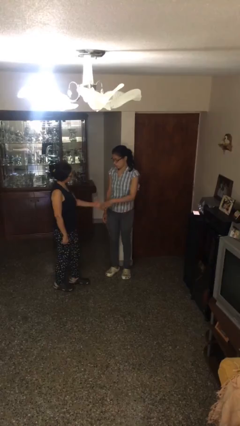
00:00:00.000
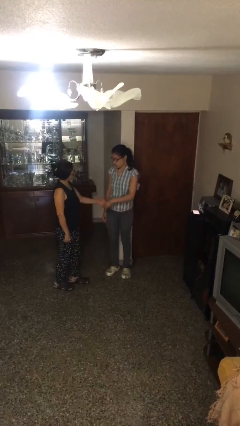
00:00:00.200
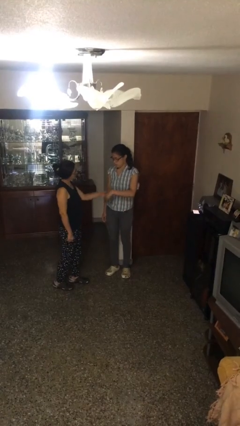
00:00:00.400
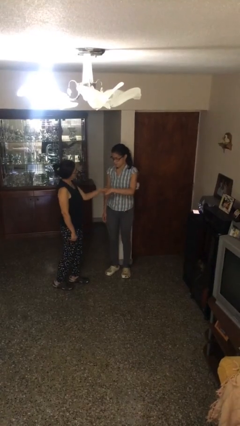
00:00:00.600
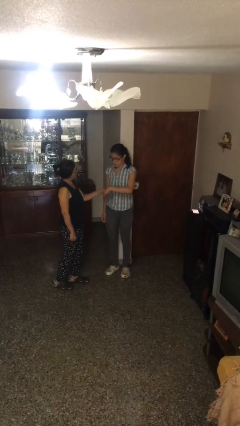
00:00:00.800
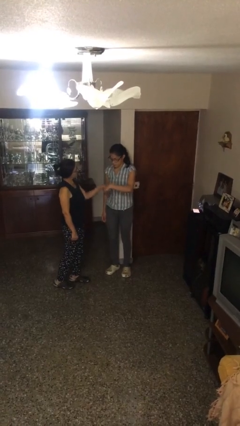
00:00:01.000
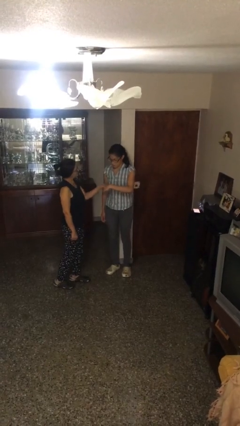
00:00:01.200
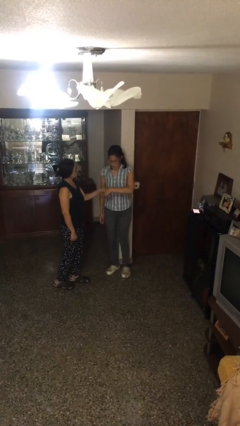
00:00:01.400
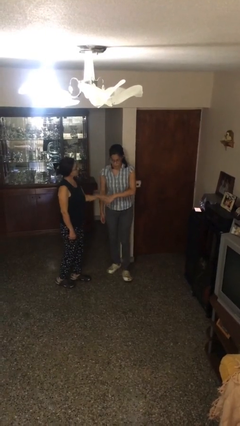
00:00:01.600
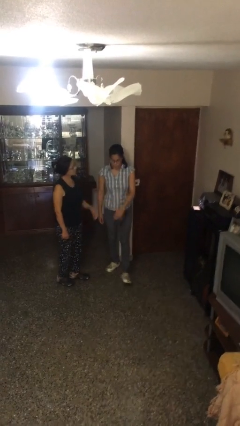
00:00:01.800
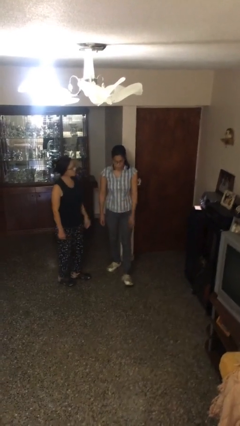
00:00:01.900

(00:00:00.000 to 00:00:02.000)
person shakes hand

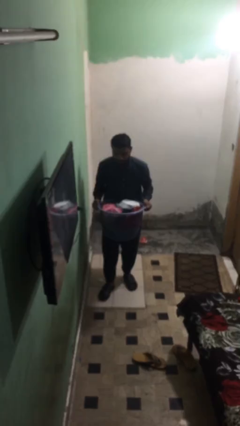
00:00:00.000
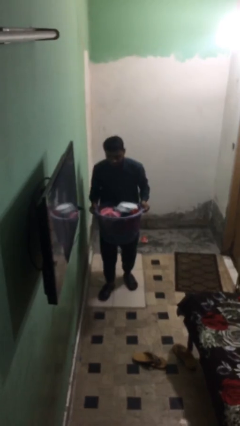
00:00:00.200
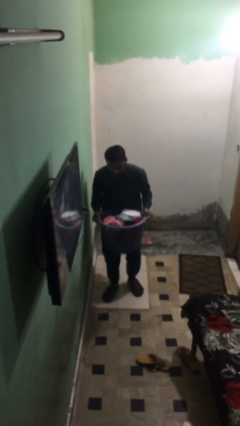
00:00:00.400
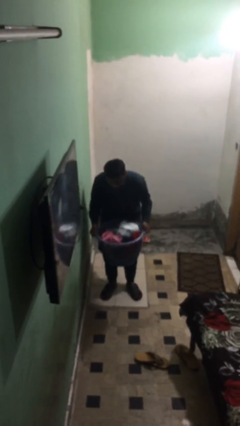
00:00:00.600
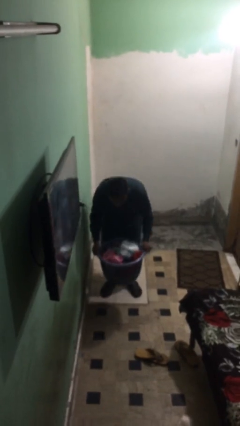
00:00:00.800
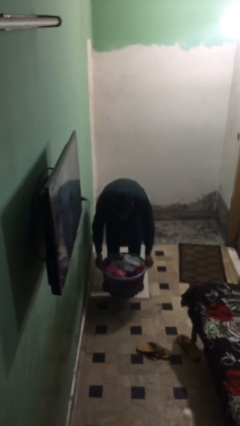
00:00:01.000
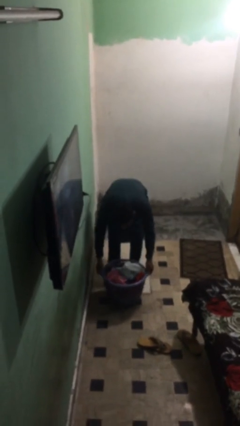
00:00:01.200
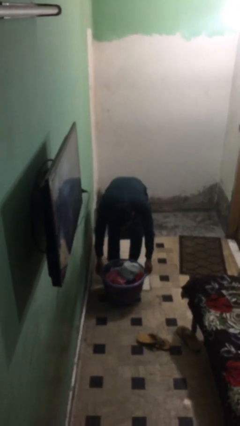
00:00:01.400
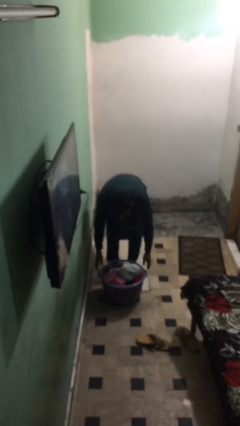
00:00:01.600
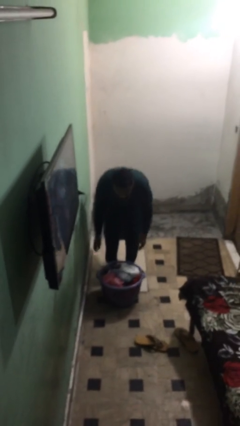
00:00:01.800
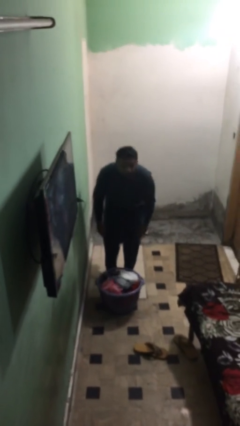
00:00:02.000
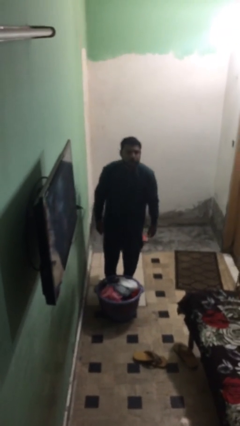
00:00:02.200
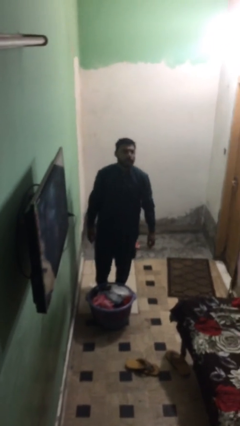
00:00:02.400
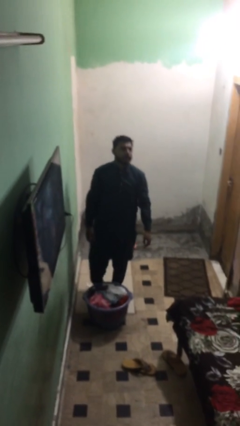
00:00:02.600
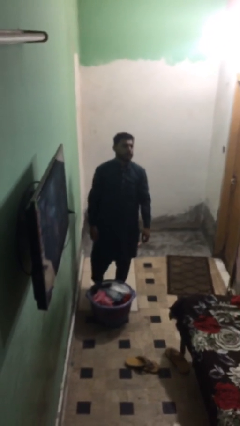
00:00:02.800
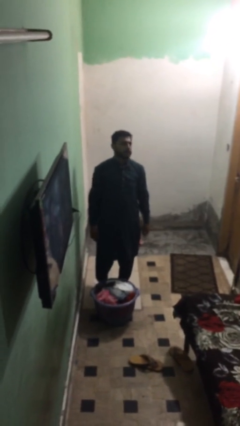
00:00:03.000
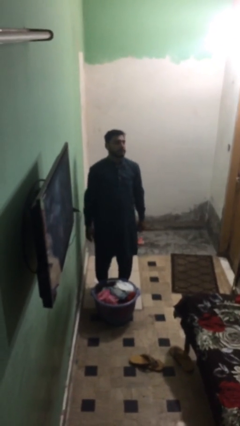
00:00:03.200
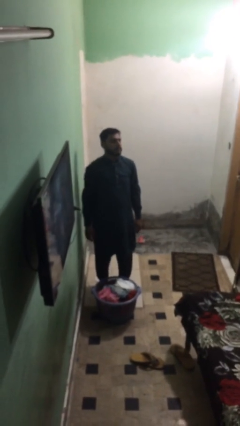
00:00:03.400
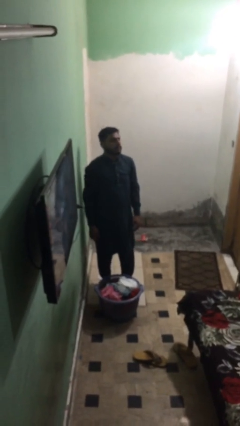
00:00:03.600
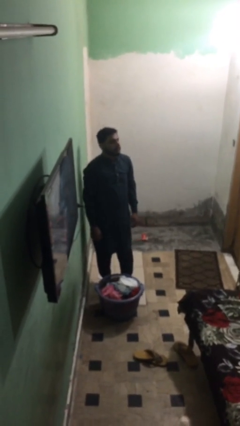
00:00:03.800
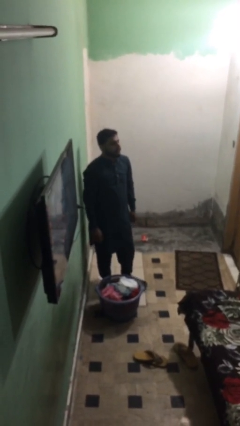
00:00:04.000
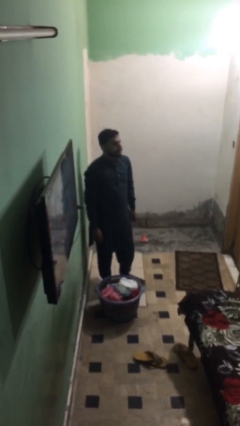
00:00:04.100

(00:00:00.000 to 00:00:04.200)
person puts down object on floor

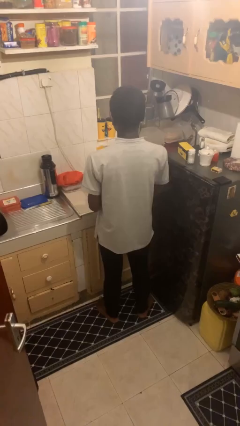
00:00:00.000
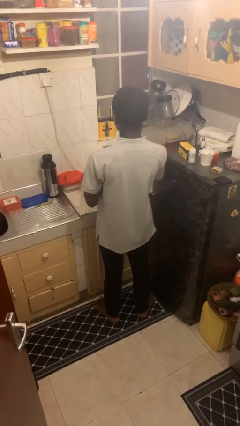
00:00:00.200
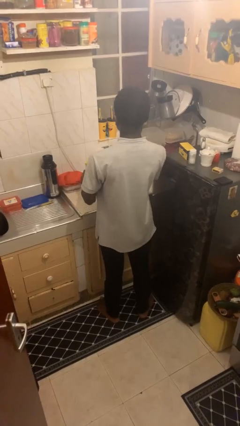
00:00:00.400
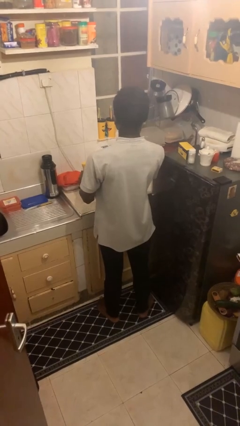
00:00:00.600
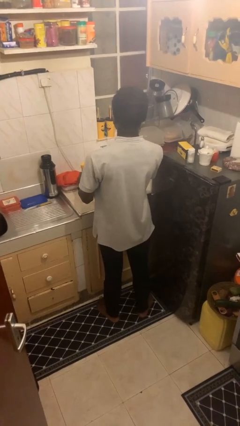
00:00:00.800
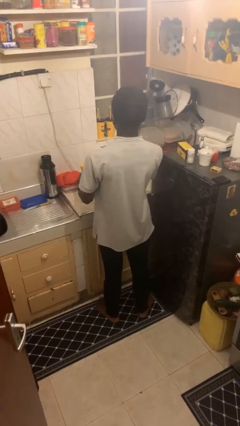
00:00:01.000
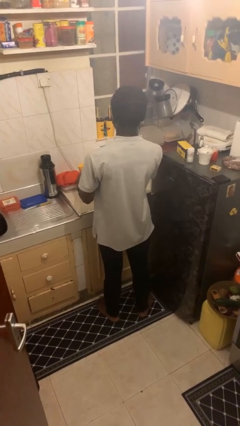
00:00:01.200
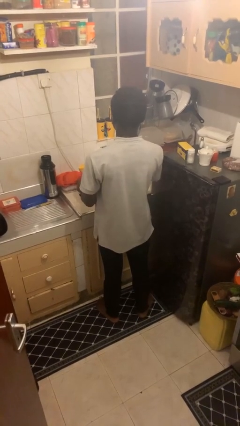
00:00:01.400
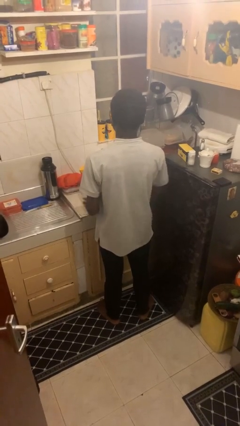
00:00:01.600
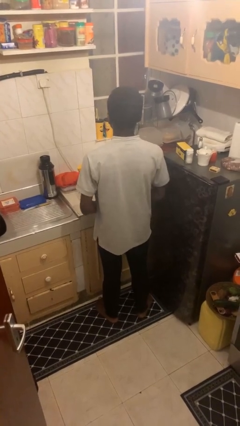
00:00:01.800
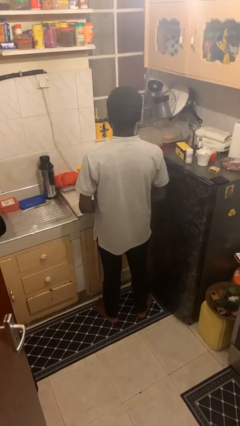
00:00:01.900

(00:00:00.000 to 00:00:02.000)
person puts down object on countertop

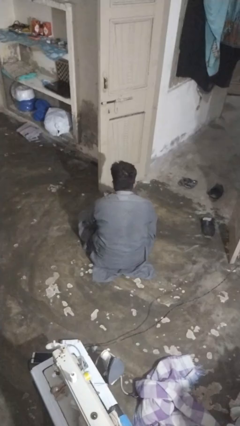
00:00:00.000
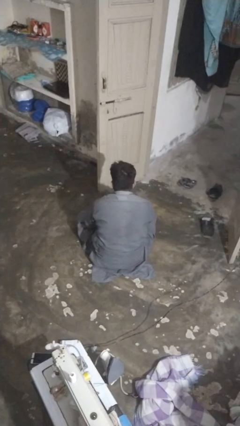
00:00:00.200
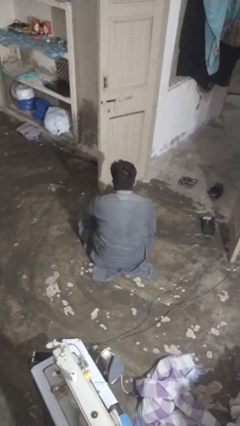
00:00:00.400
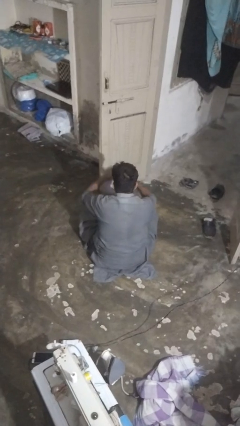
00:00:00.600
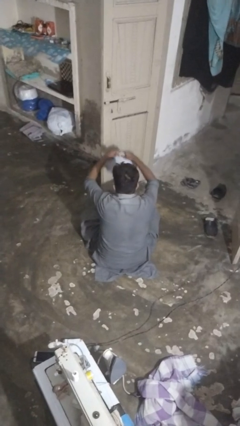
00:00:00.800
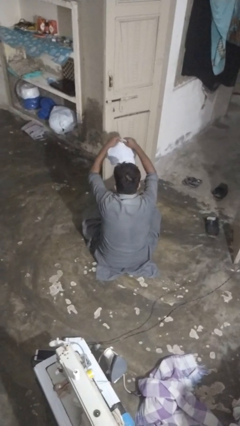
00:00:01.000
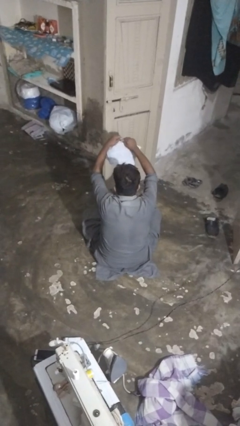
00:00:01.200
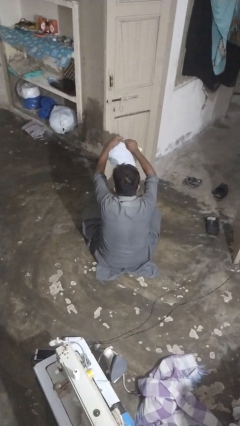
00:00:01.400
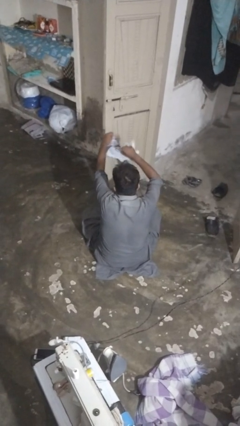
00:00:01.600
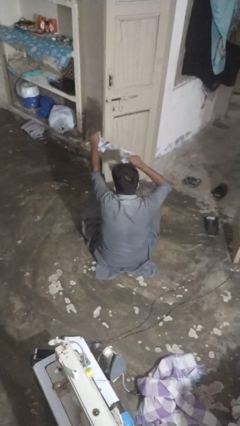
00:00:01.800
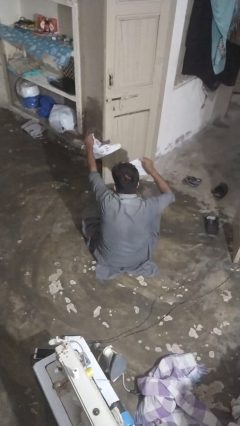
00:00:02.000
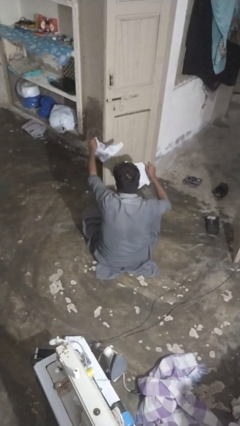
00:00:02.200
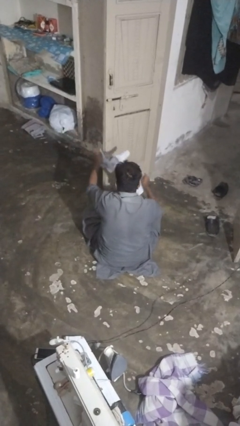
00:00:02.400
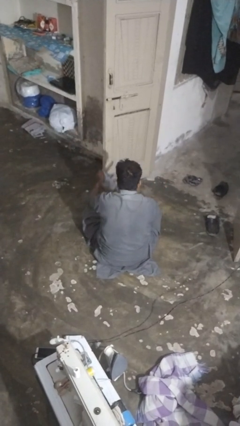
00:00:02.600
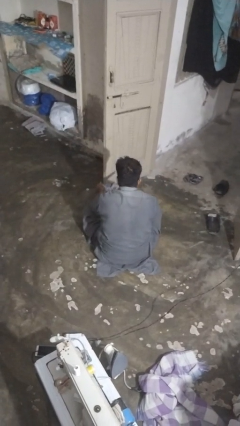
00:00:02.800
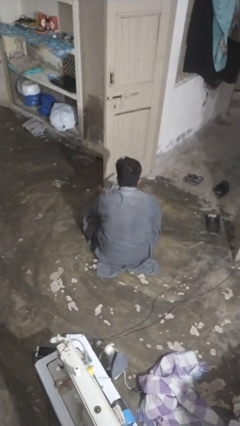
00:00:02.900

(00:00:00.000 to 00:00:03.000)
person tears paper

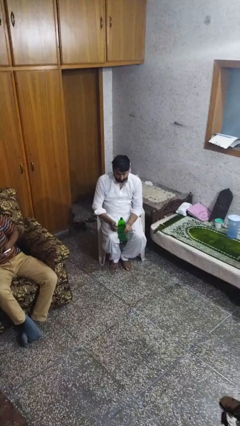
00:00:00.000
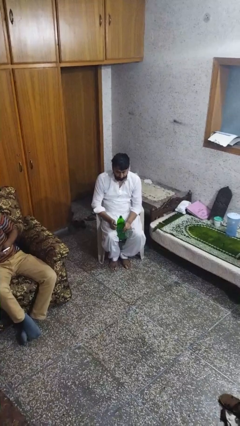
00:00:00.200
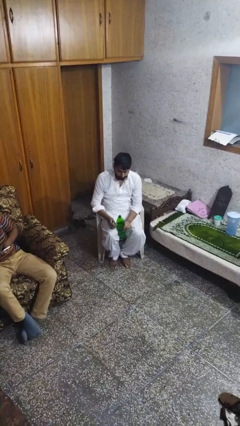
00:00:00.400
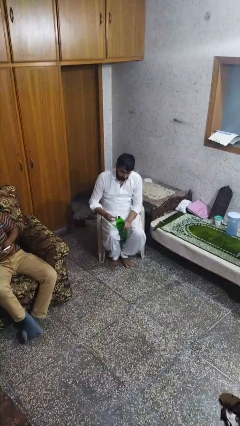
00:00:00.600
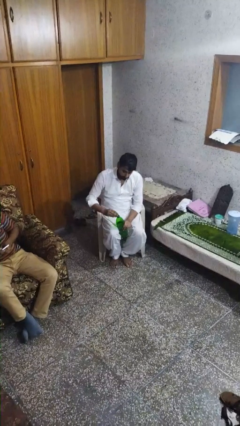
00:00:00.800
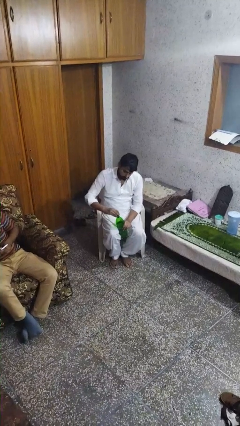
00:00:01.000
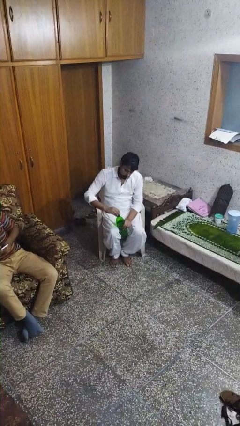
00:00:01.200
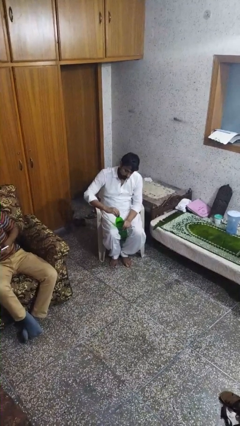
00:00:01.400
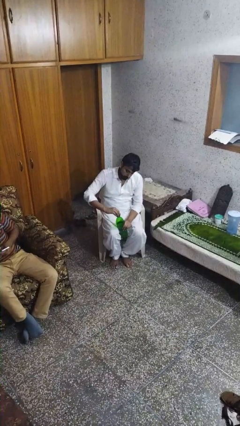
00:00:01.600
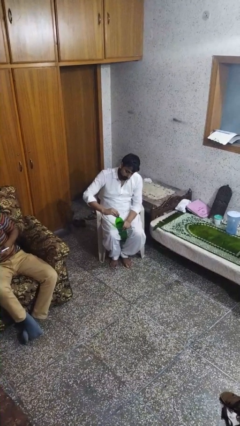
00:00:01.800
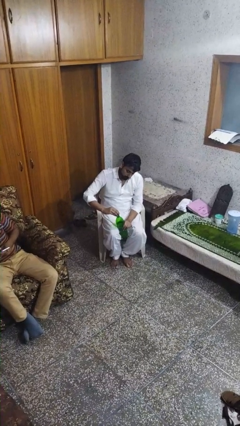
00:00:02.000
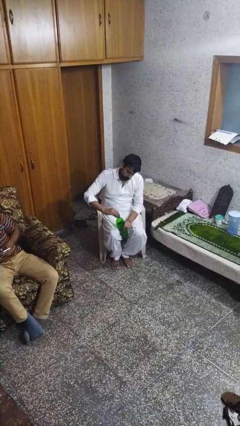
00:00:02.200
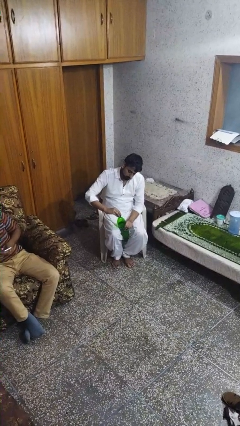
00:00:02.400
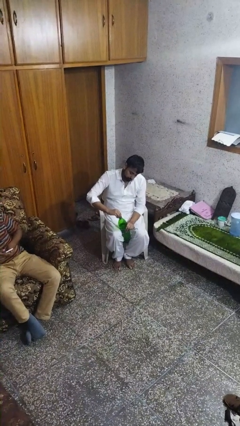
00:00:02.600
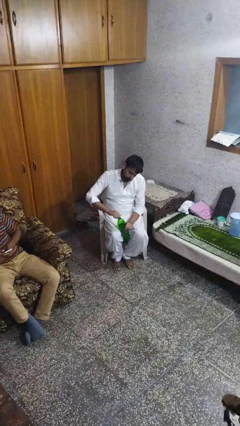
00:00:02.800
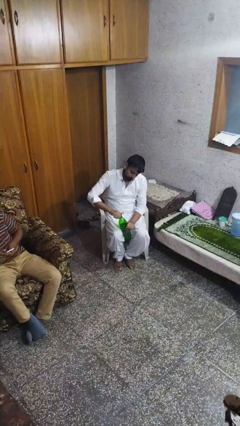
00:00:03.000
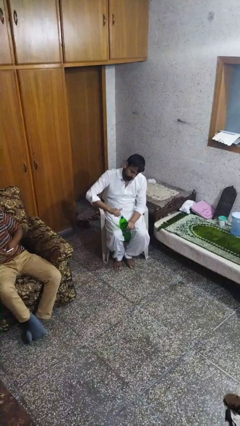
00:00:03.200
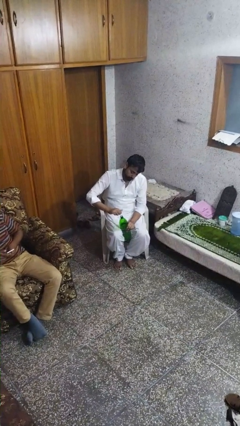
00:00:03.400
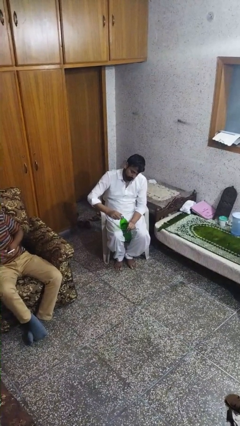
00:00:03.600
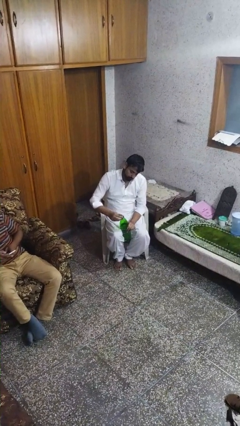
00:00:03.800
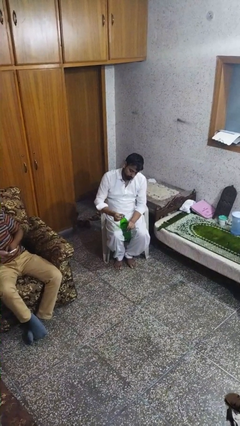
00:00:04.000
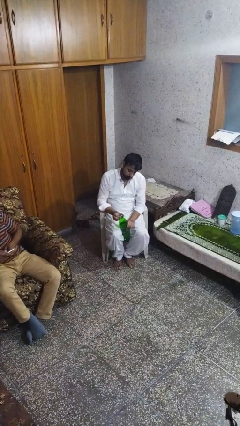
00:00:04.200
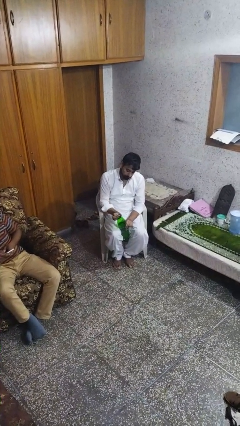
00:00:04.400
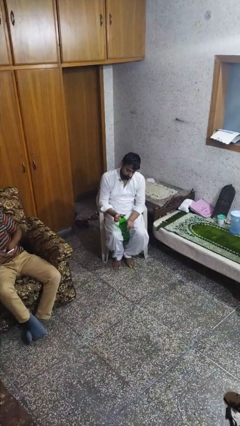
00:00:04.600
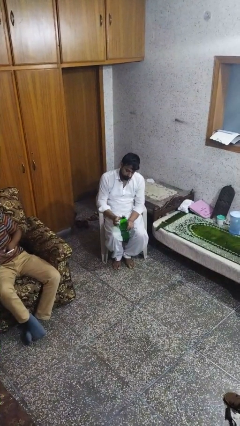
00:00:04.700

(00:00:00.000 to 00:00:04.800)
person screws lid to bottle

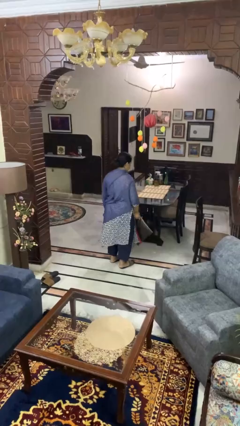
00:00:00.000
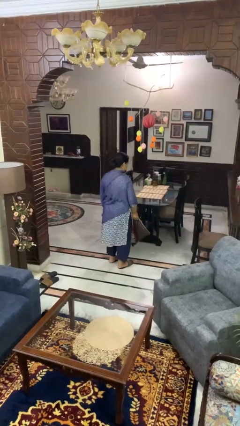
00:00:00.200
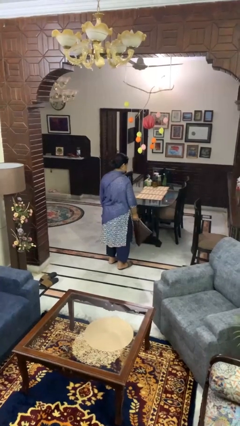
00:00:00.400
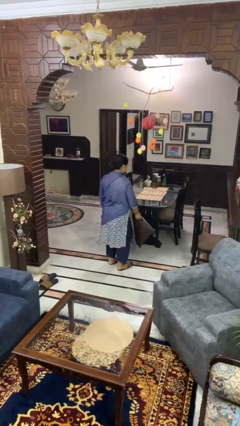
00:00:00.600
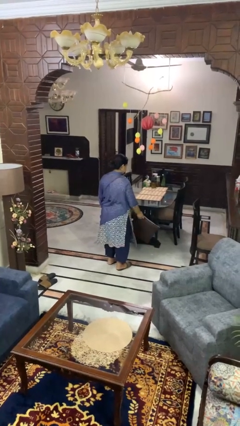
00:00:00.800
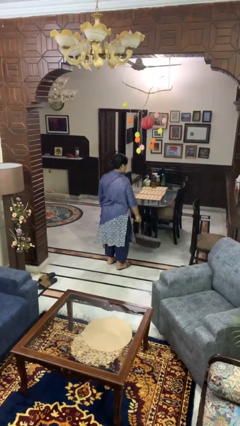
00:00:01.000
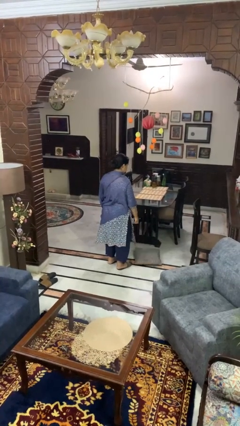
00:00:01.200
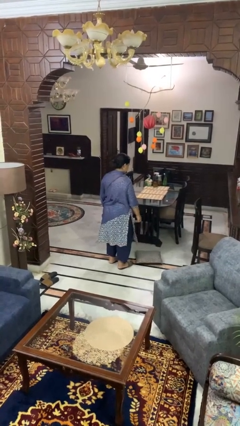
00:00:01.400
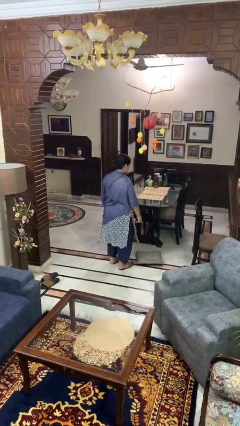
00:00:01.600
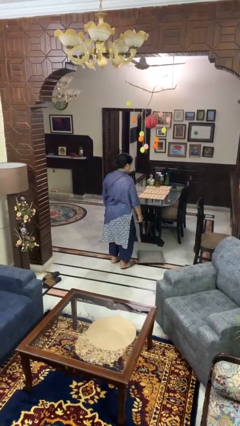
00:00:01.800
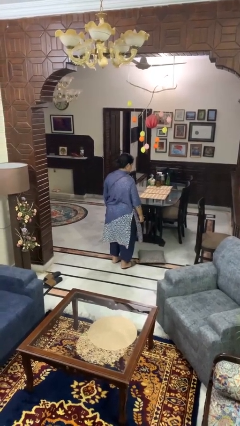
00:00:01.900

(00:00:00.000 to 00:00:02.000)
person throws object to ground
